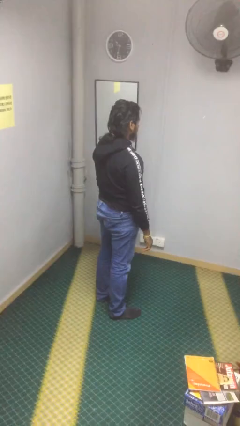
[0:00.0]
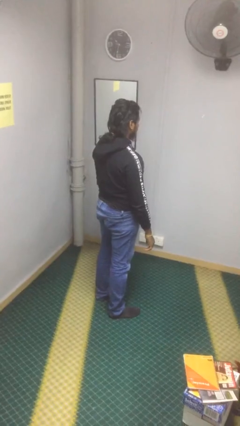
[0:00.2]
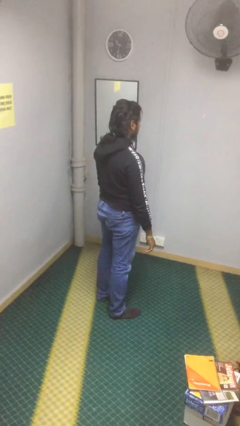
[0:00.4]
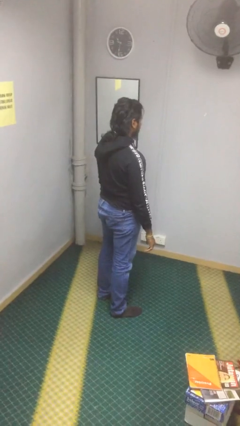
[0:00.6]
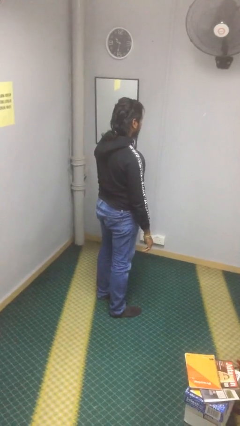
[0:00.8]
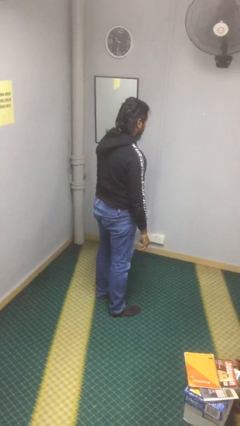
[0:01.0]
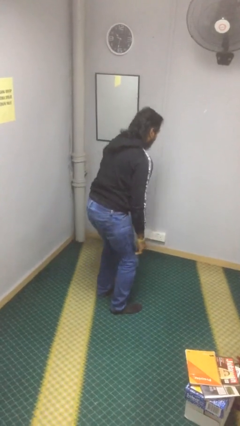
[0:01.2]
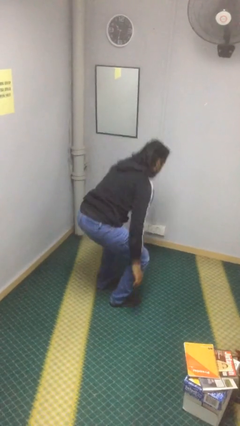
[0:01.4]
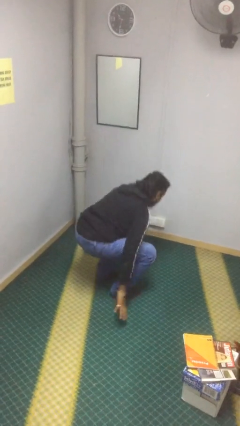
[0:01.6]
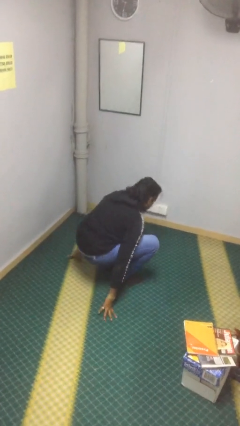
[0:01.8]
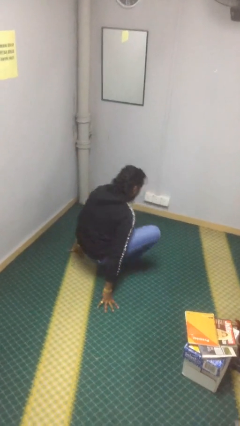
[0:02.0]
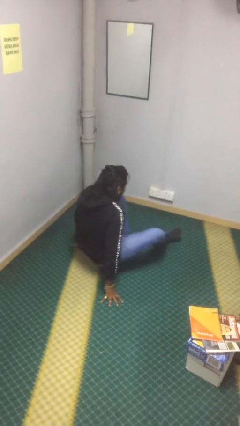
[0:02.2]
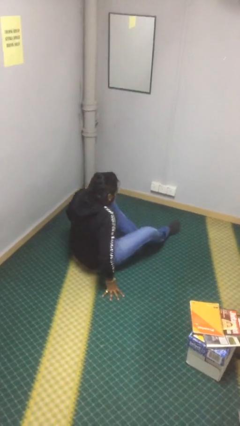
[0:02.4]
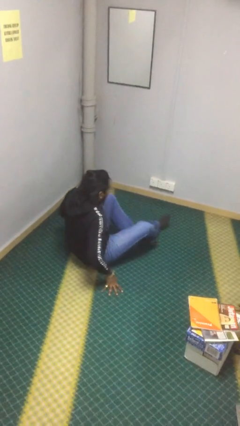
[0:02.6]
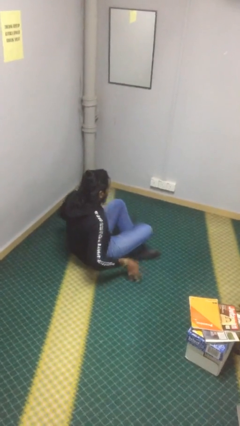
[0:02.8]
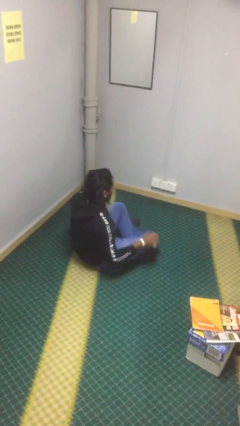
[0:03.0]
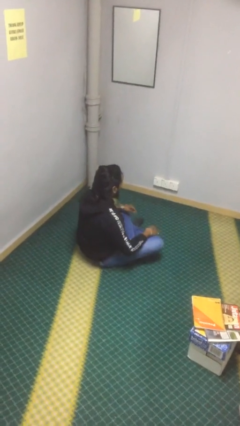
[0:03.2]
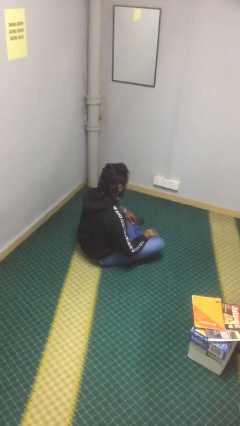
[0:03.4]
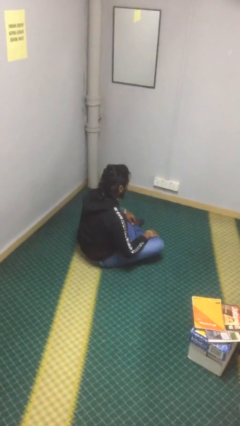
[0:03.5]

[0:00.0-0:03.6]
person sits crisscross

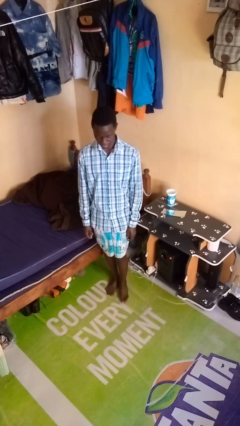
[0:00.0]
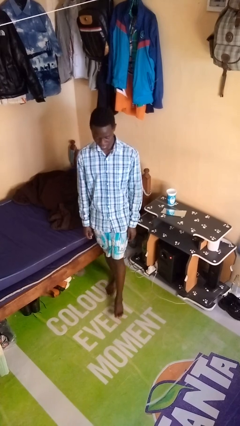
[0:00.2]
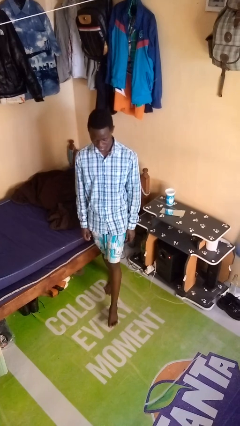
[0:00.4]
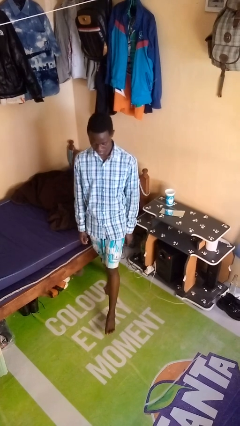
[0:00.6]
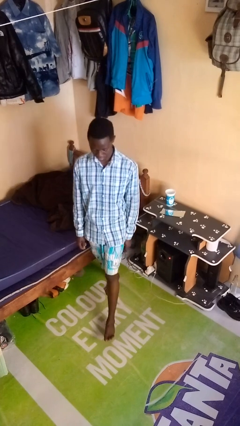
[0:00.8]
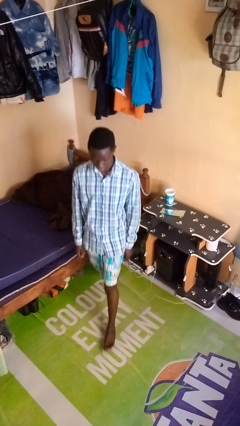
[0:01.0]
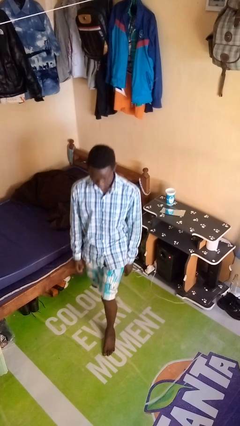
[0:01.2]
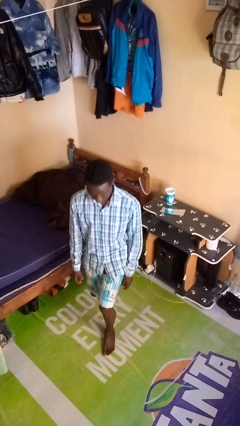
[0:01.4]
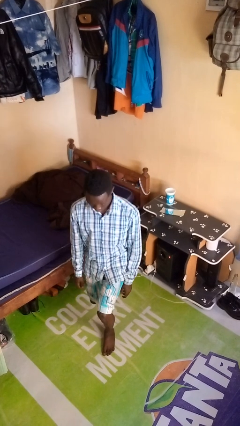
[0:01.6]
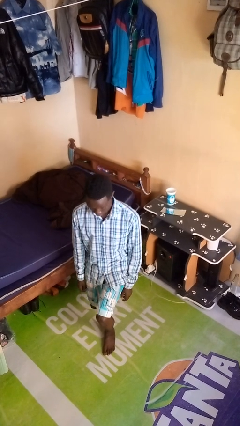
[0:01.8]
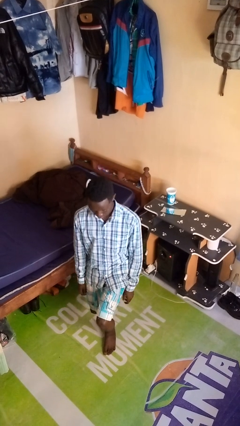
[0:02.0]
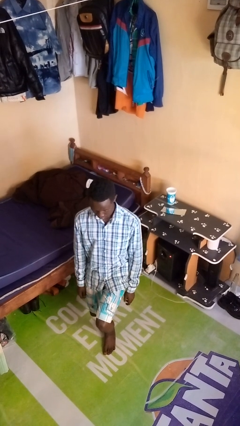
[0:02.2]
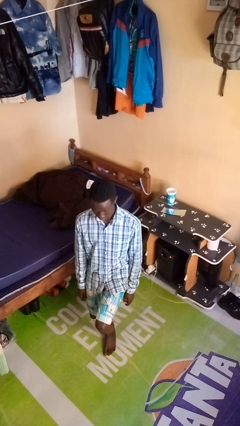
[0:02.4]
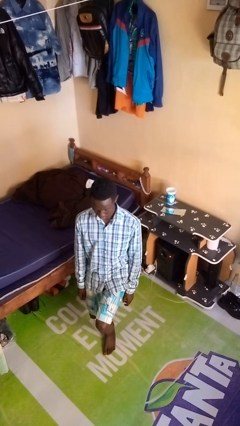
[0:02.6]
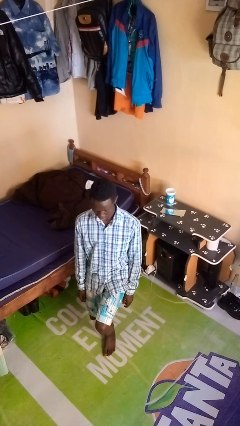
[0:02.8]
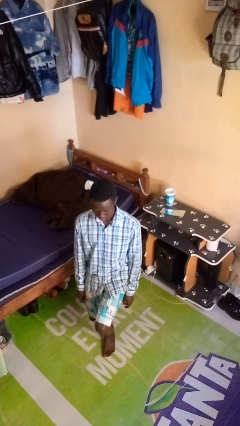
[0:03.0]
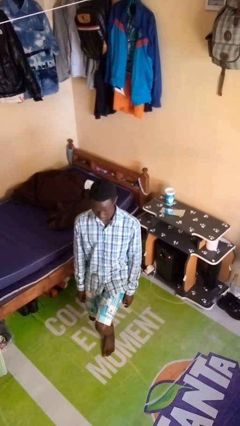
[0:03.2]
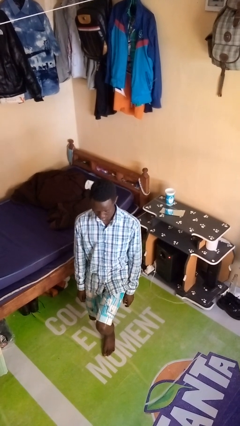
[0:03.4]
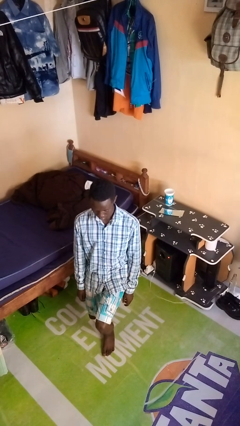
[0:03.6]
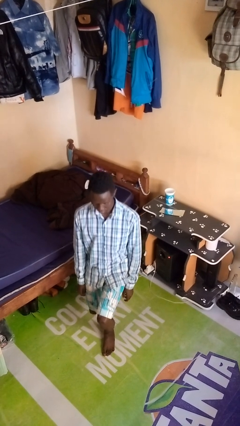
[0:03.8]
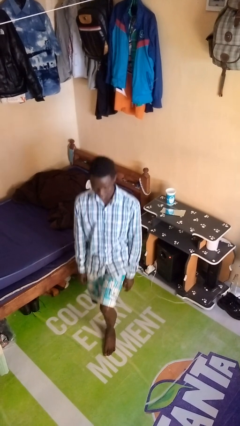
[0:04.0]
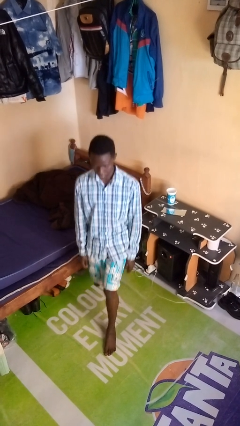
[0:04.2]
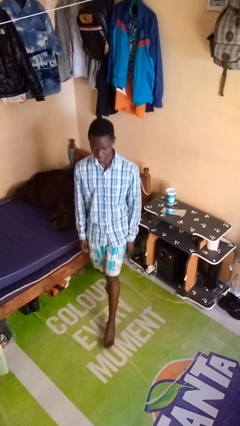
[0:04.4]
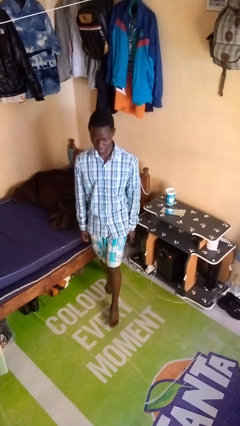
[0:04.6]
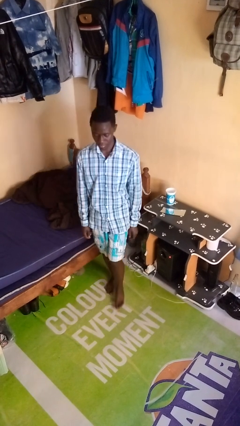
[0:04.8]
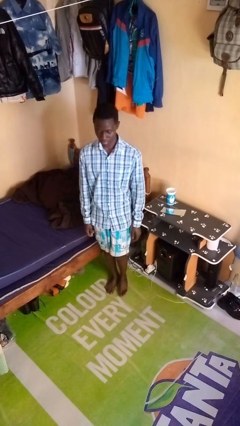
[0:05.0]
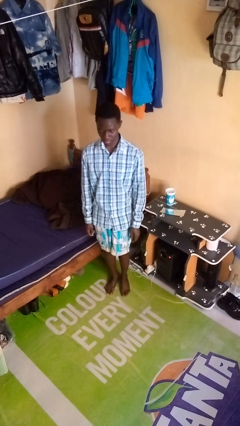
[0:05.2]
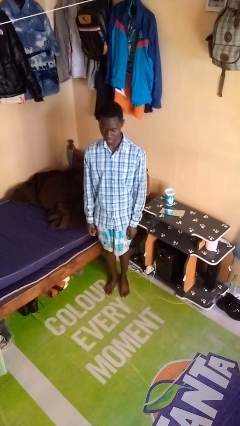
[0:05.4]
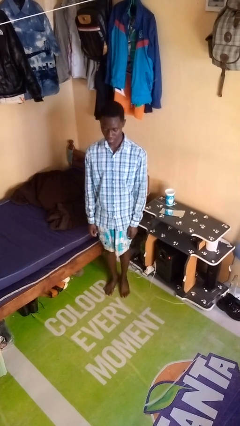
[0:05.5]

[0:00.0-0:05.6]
person exercises with lunges

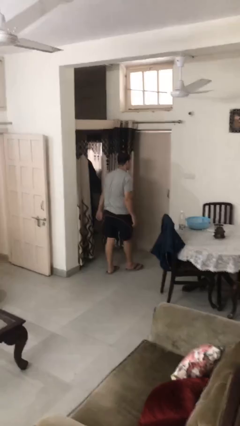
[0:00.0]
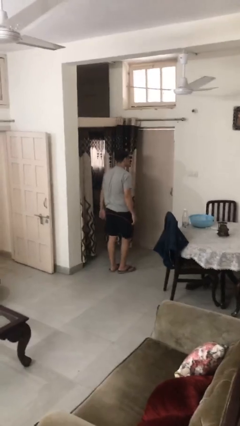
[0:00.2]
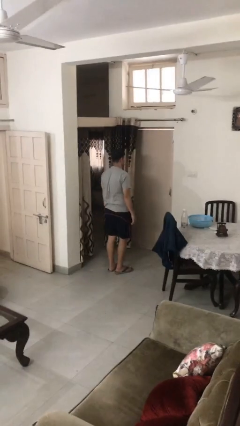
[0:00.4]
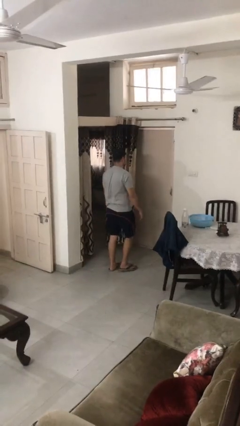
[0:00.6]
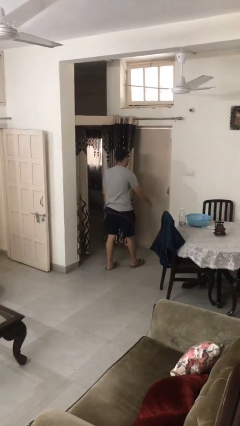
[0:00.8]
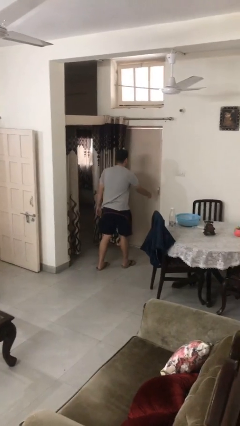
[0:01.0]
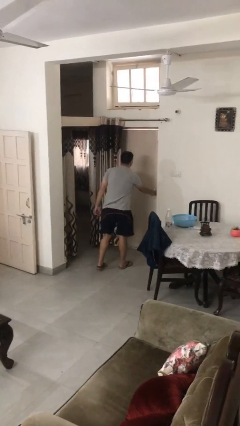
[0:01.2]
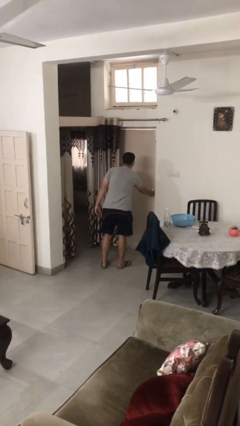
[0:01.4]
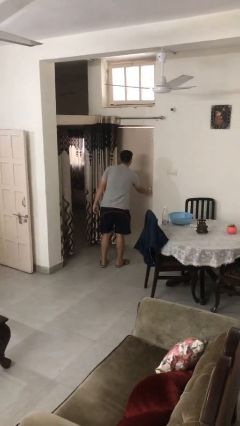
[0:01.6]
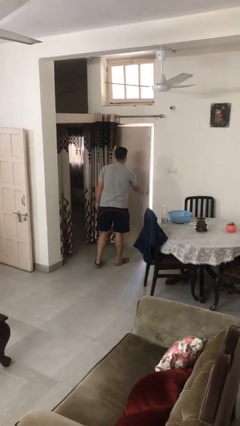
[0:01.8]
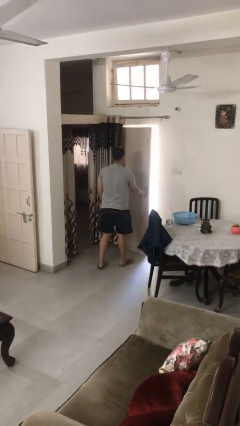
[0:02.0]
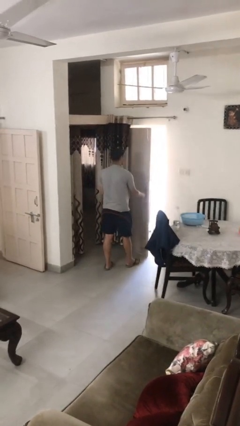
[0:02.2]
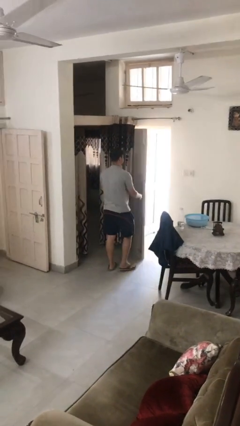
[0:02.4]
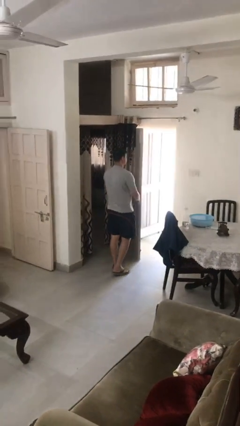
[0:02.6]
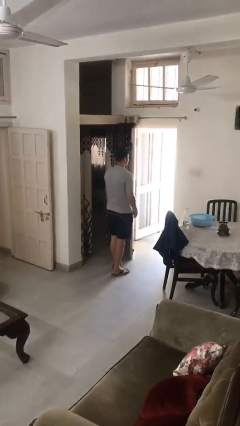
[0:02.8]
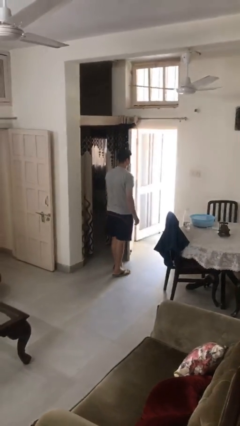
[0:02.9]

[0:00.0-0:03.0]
person opens facility door

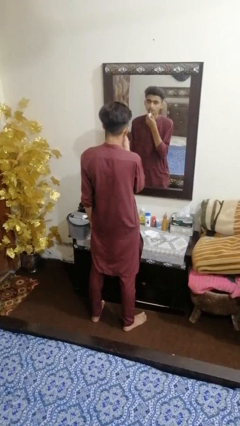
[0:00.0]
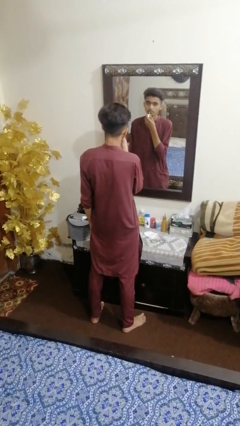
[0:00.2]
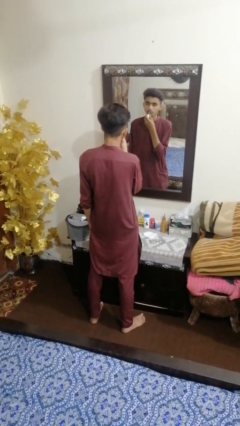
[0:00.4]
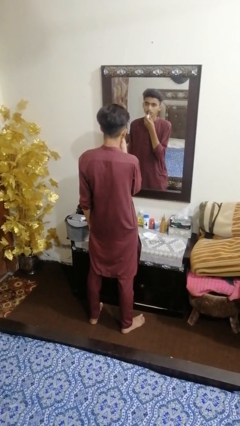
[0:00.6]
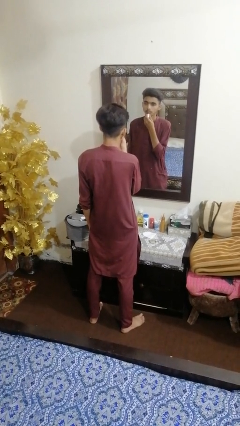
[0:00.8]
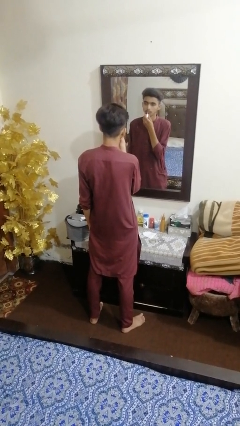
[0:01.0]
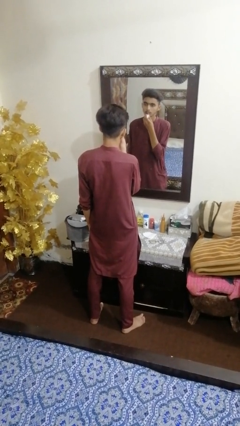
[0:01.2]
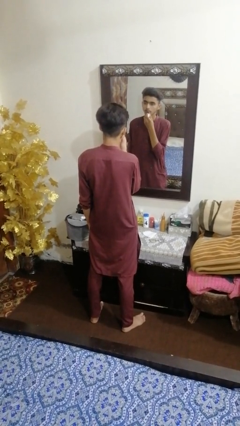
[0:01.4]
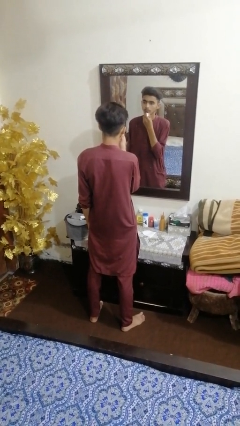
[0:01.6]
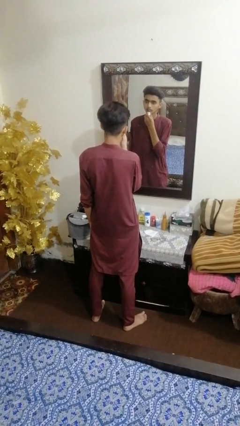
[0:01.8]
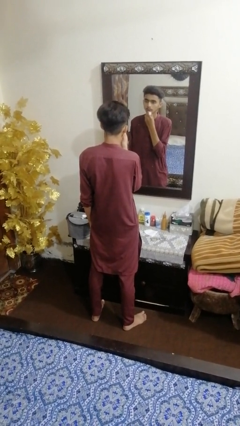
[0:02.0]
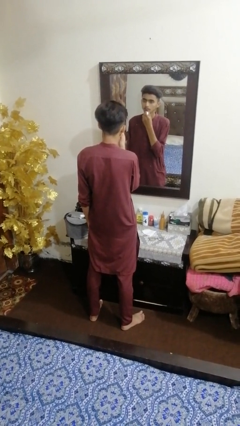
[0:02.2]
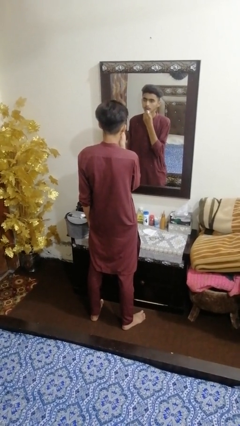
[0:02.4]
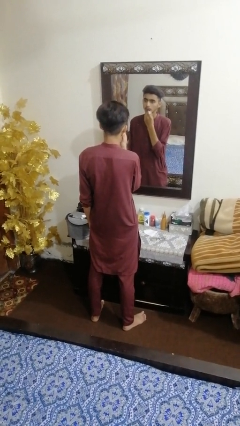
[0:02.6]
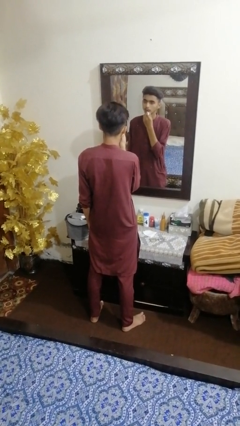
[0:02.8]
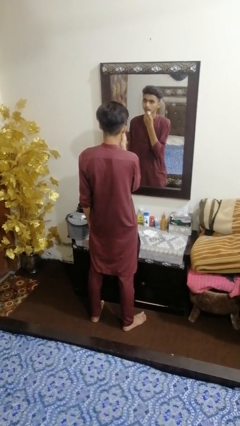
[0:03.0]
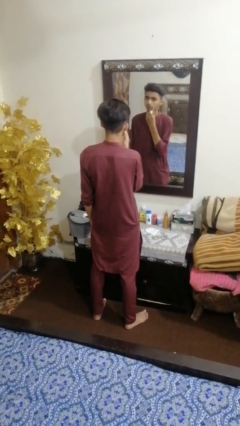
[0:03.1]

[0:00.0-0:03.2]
person applies lip makeup

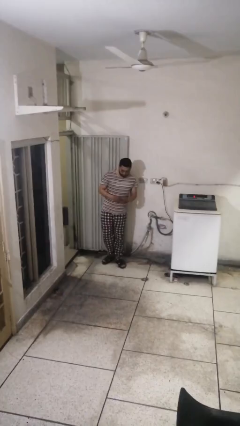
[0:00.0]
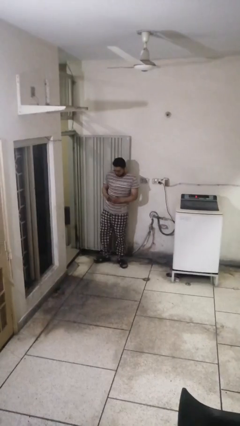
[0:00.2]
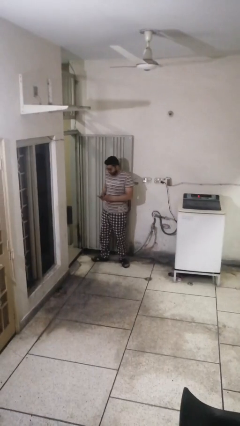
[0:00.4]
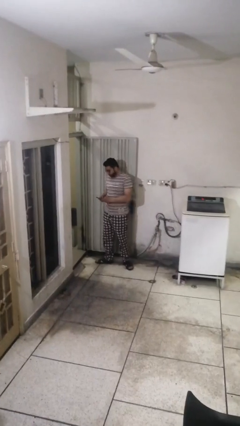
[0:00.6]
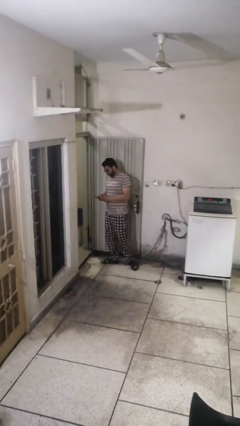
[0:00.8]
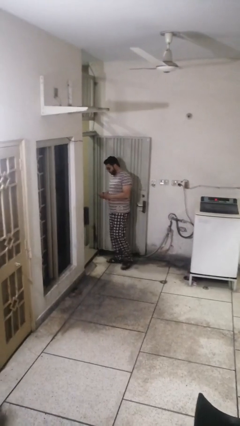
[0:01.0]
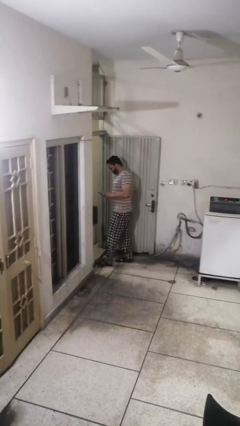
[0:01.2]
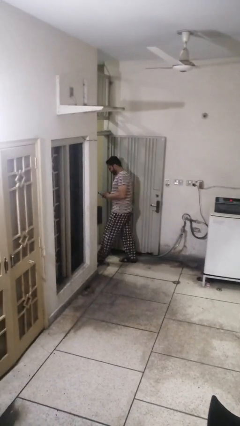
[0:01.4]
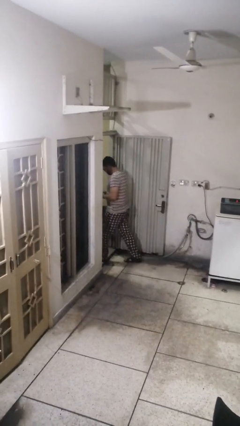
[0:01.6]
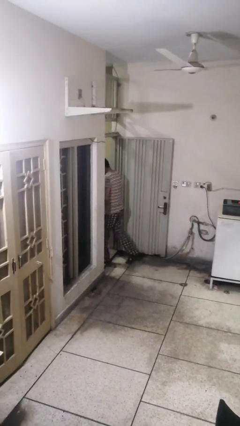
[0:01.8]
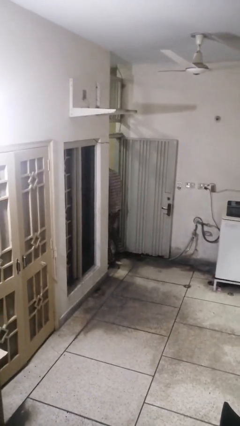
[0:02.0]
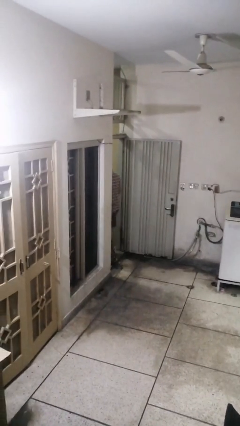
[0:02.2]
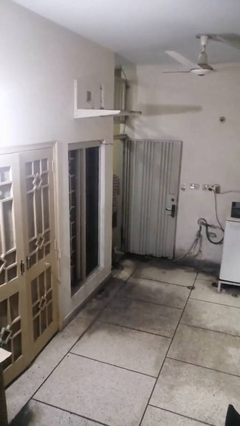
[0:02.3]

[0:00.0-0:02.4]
person exits scene through structure
